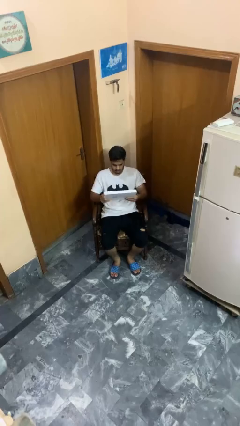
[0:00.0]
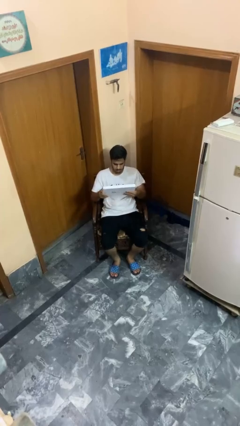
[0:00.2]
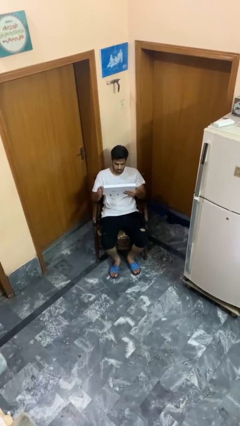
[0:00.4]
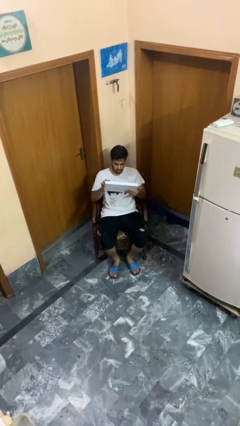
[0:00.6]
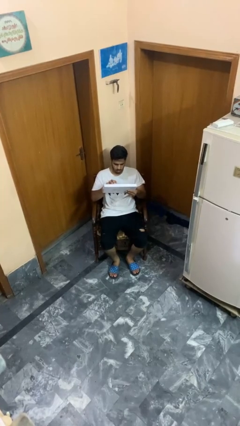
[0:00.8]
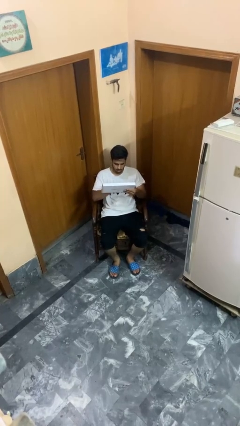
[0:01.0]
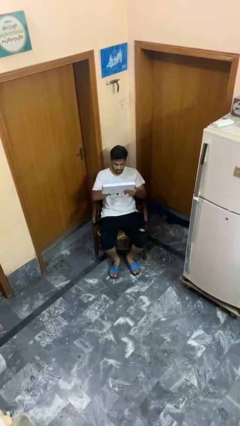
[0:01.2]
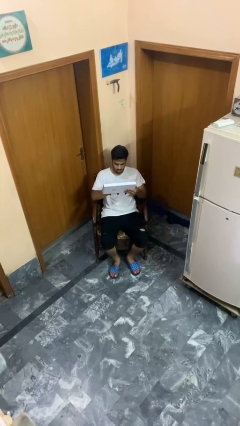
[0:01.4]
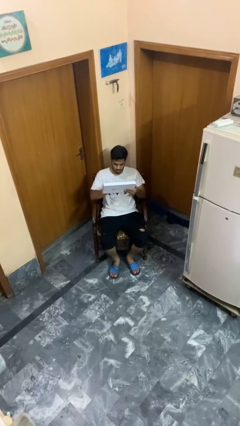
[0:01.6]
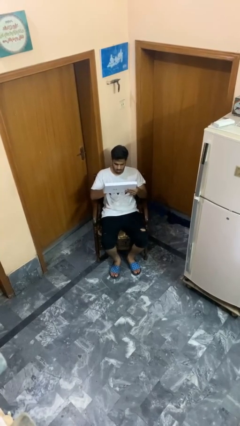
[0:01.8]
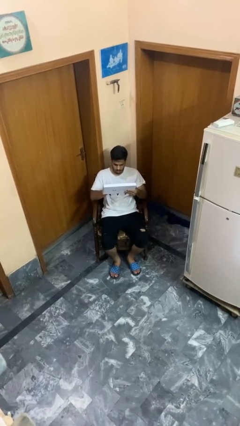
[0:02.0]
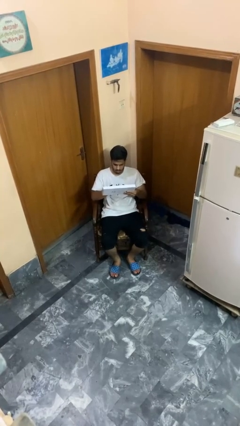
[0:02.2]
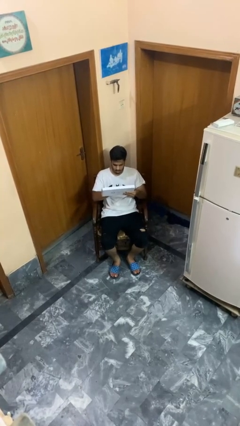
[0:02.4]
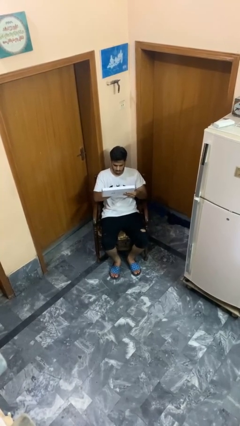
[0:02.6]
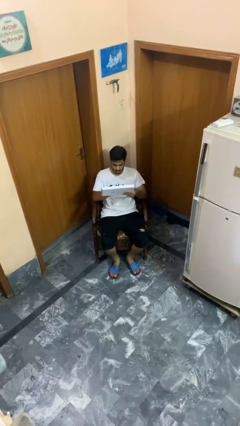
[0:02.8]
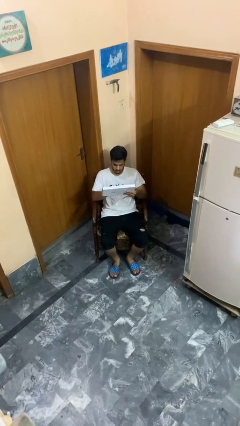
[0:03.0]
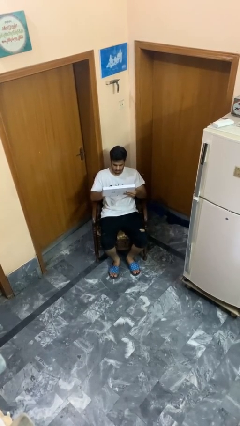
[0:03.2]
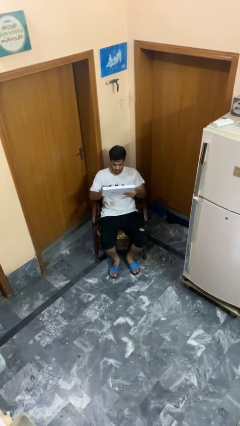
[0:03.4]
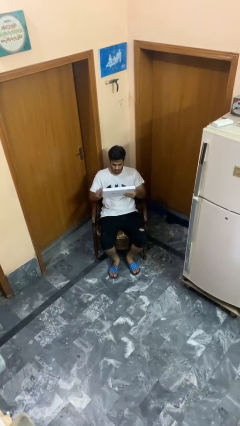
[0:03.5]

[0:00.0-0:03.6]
person interacts with tablet

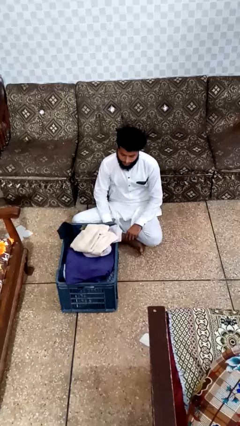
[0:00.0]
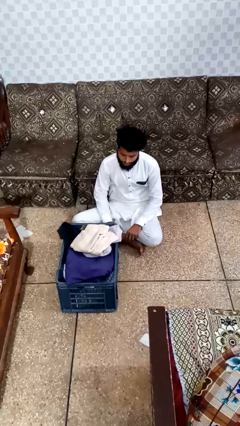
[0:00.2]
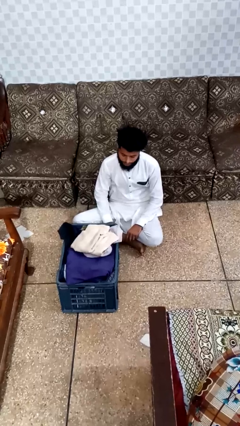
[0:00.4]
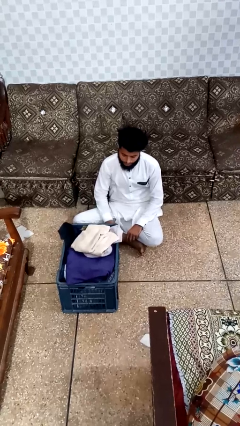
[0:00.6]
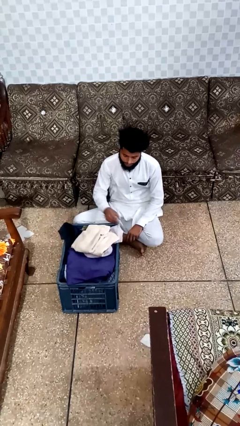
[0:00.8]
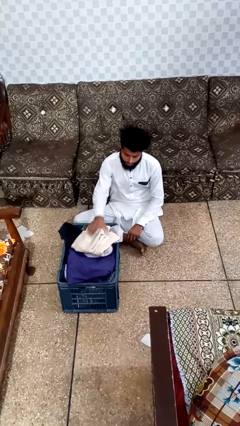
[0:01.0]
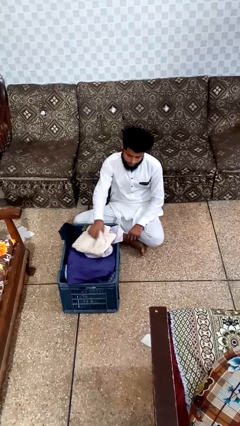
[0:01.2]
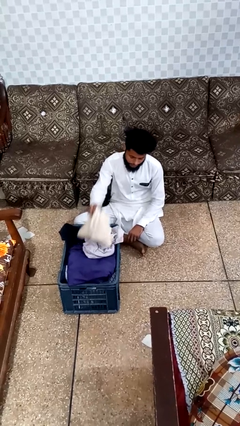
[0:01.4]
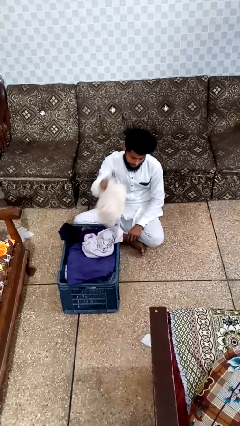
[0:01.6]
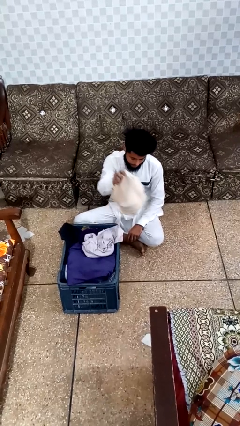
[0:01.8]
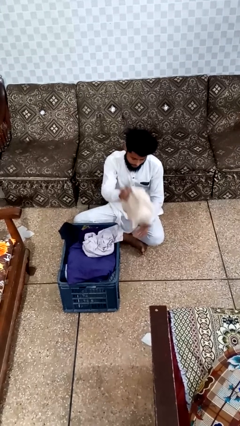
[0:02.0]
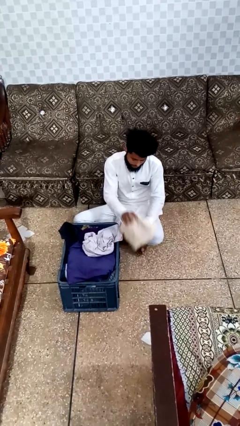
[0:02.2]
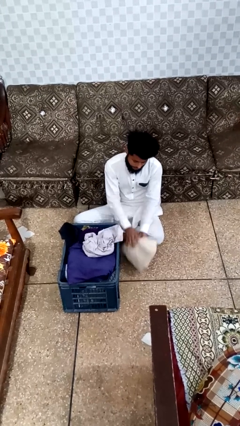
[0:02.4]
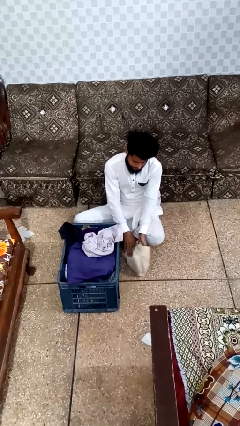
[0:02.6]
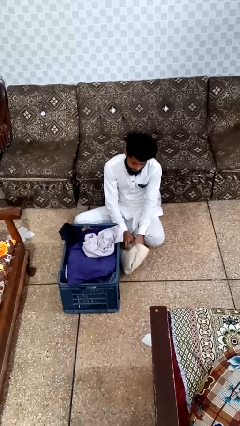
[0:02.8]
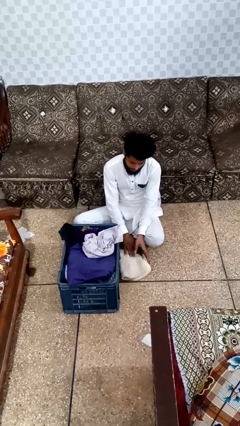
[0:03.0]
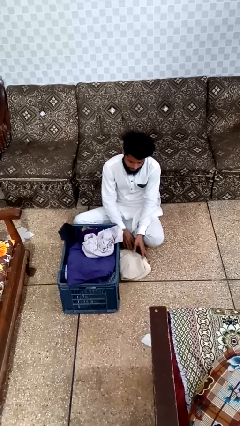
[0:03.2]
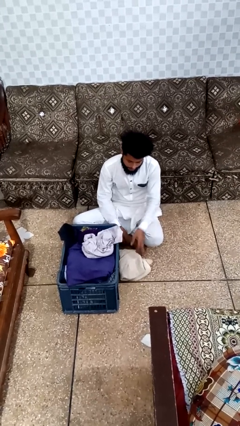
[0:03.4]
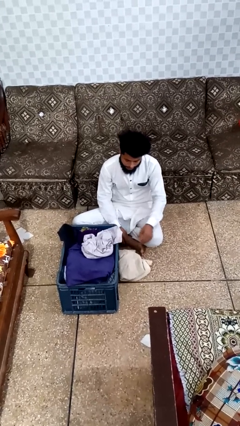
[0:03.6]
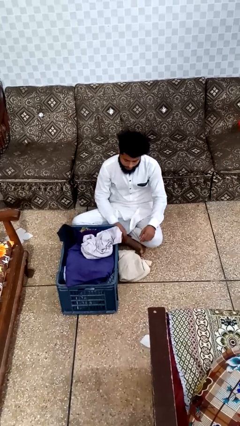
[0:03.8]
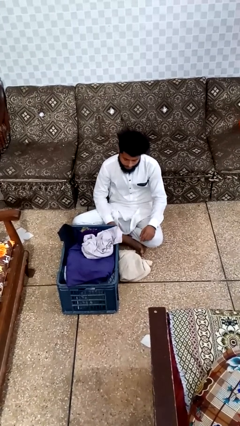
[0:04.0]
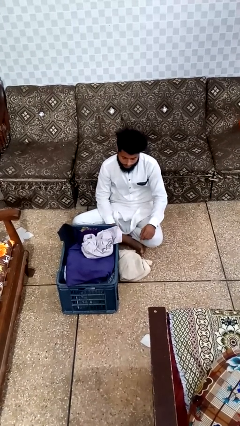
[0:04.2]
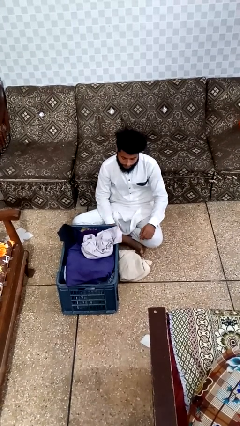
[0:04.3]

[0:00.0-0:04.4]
person puts object into basket

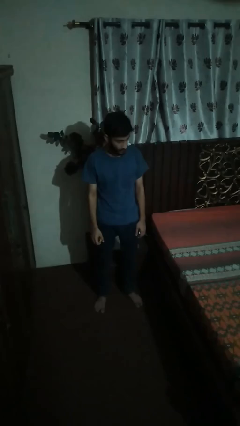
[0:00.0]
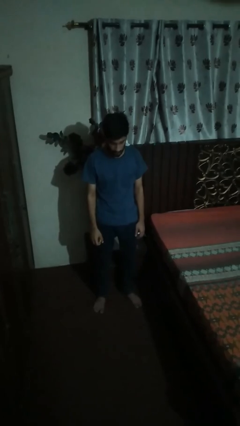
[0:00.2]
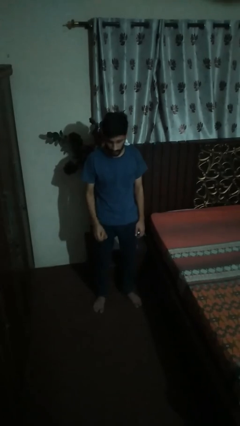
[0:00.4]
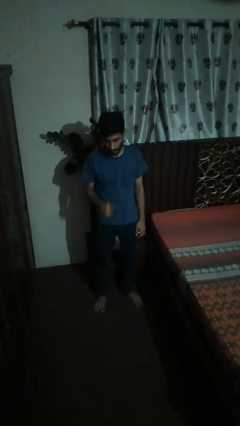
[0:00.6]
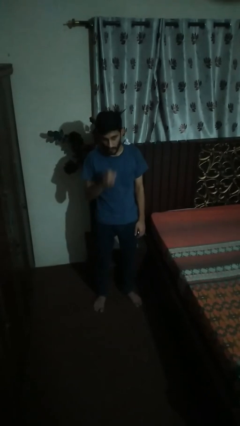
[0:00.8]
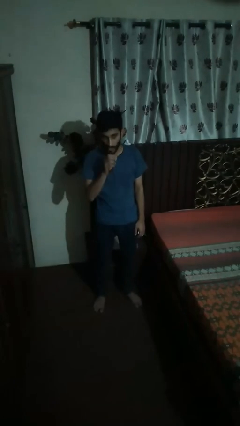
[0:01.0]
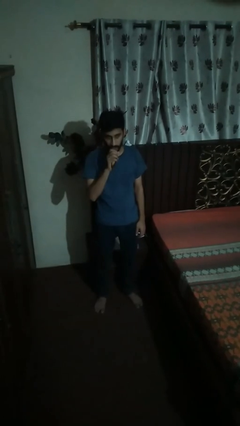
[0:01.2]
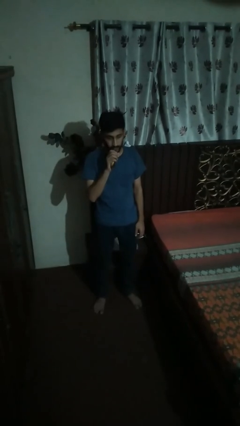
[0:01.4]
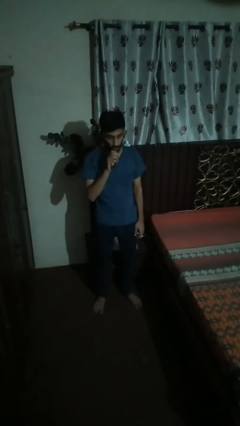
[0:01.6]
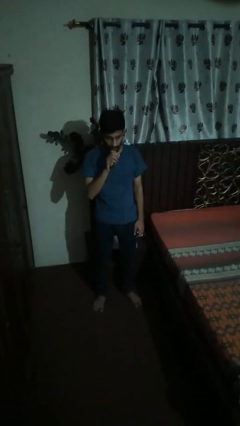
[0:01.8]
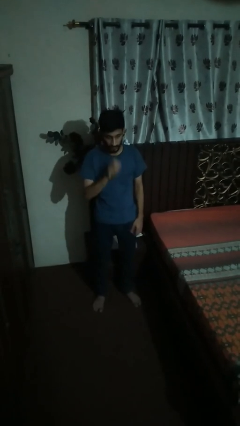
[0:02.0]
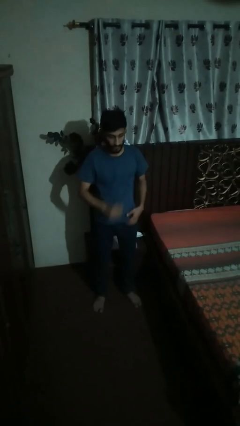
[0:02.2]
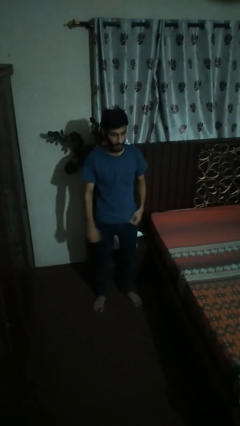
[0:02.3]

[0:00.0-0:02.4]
person eats banana

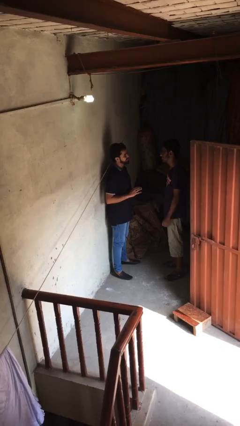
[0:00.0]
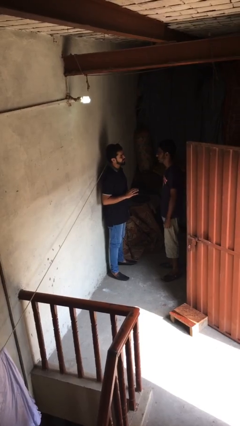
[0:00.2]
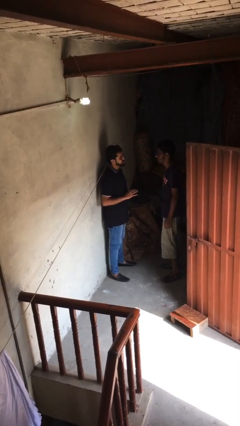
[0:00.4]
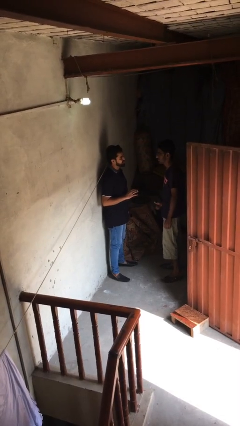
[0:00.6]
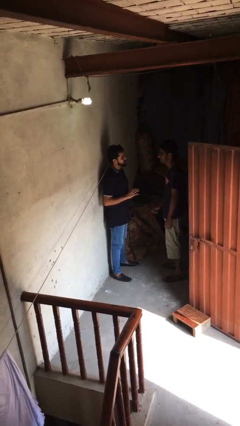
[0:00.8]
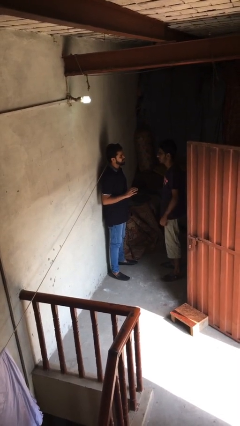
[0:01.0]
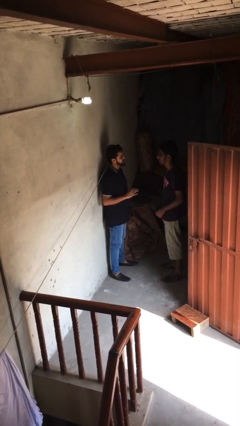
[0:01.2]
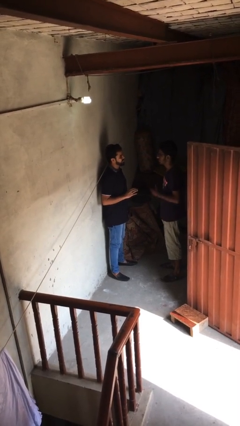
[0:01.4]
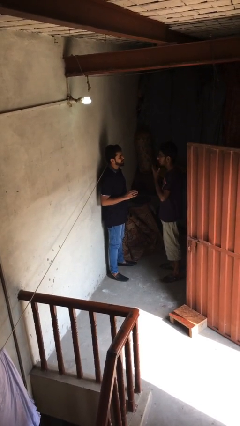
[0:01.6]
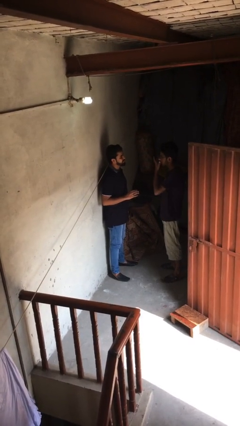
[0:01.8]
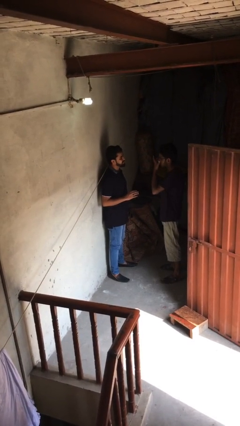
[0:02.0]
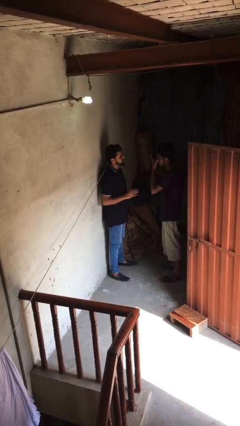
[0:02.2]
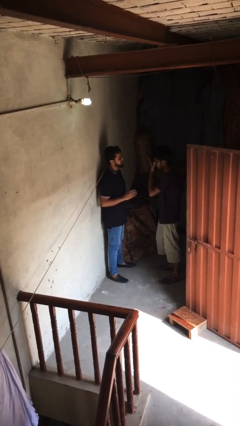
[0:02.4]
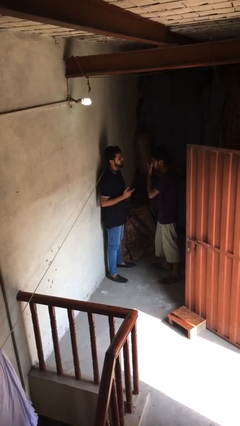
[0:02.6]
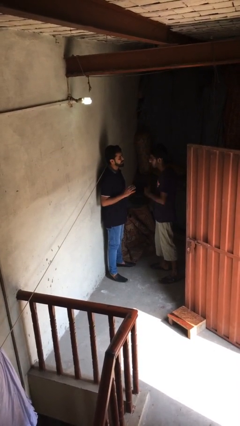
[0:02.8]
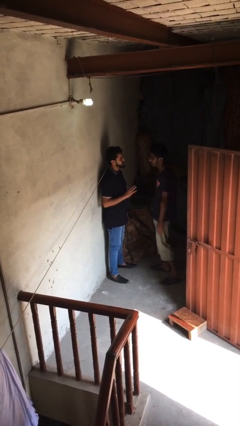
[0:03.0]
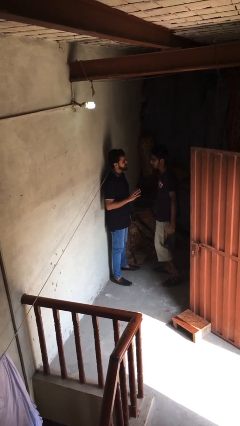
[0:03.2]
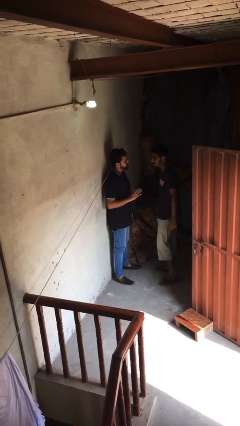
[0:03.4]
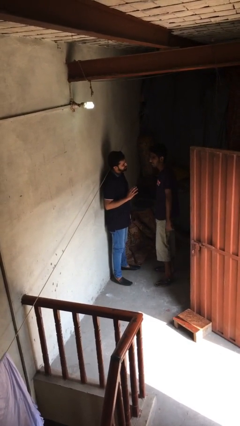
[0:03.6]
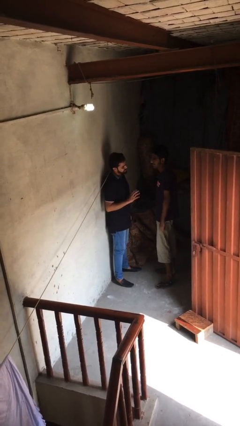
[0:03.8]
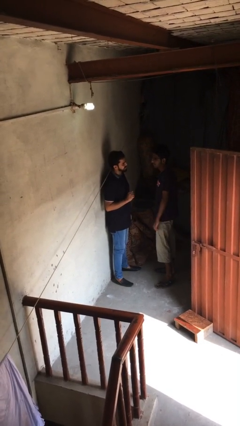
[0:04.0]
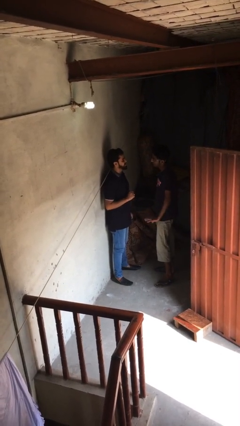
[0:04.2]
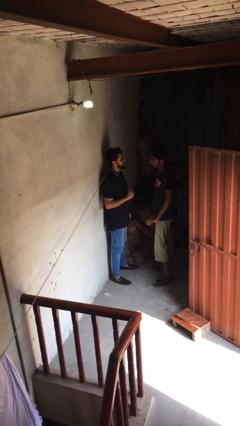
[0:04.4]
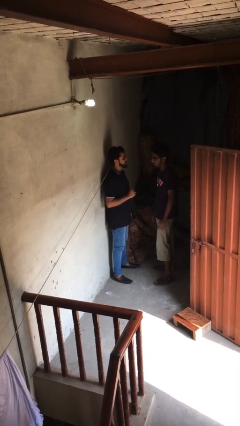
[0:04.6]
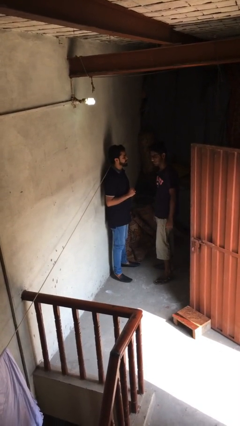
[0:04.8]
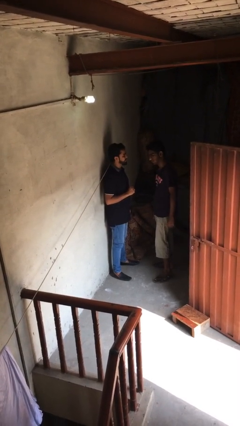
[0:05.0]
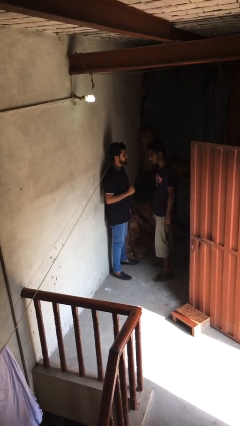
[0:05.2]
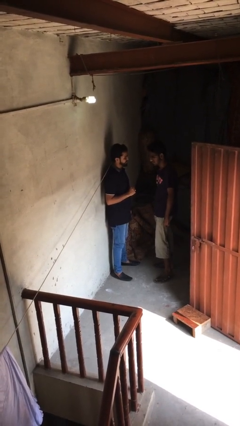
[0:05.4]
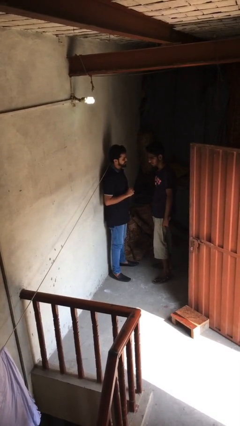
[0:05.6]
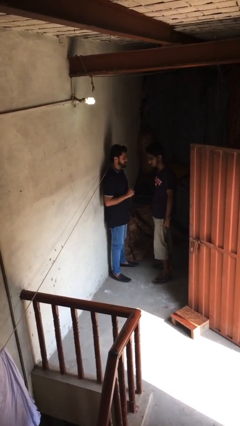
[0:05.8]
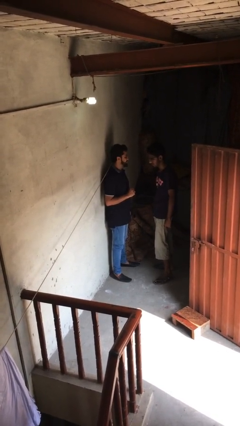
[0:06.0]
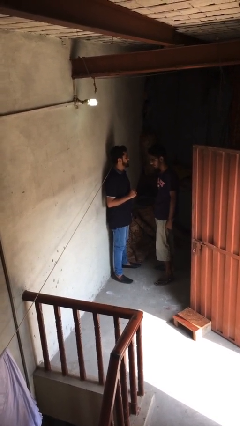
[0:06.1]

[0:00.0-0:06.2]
person talks to person

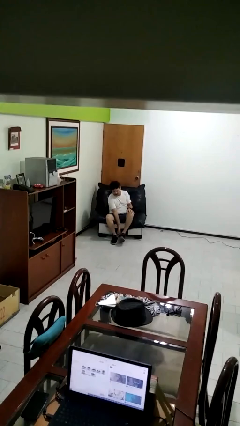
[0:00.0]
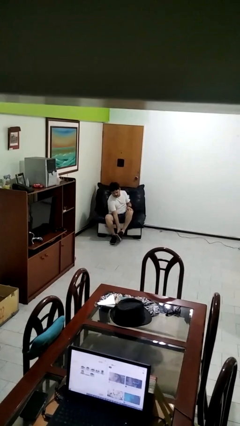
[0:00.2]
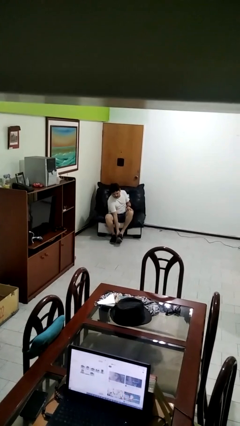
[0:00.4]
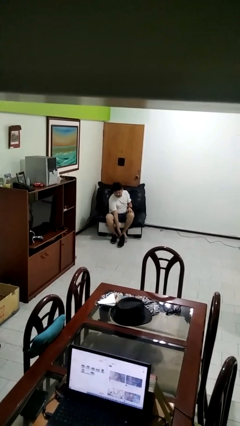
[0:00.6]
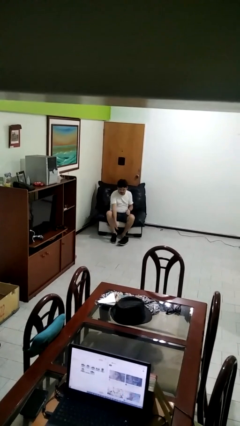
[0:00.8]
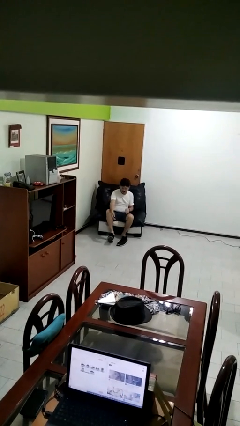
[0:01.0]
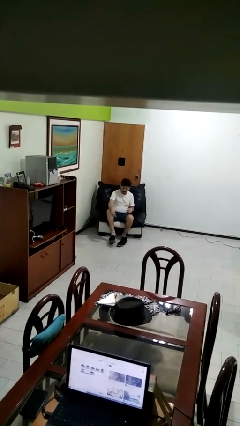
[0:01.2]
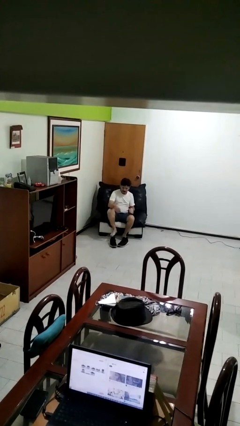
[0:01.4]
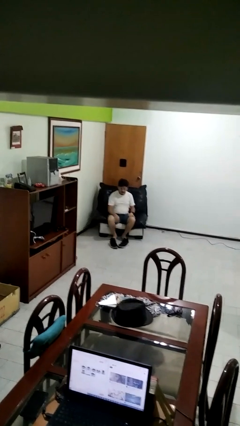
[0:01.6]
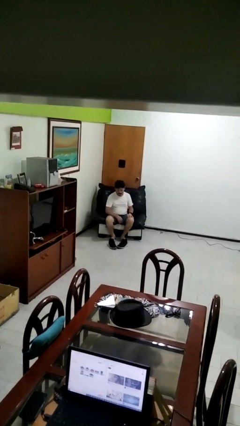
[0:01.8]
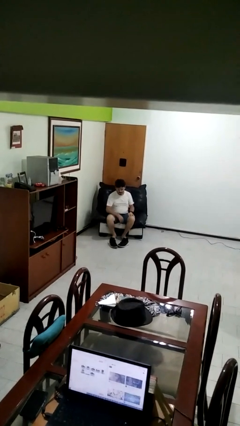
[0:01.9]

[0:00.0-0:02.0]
person takes off shoes
